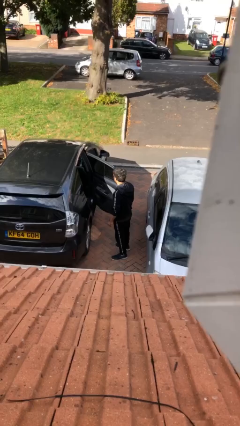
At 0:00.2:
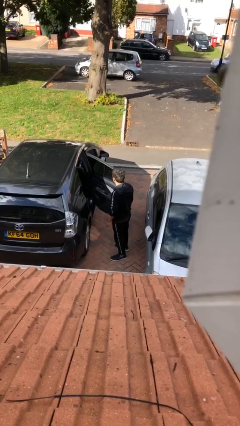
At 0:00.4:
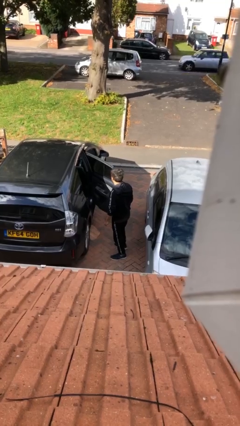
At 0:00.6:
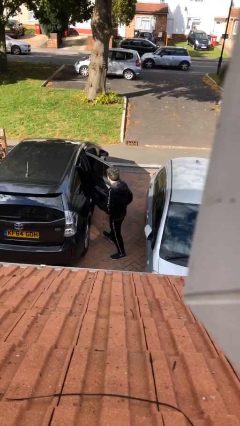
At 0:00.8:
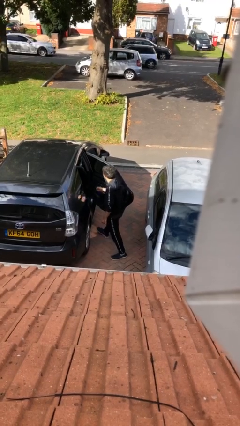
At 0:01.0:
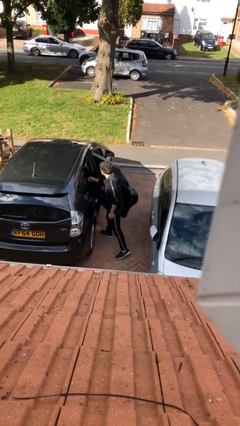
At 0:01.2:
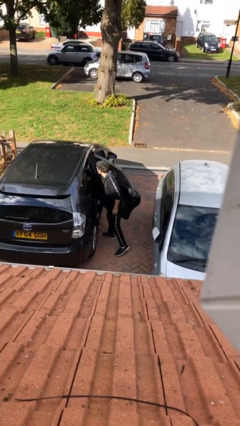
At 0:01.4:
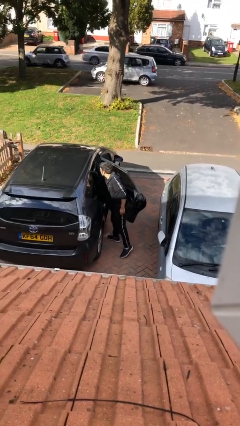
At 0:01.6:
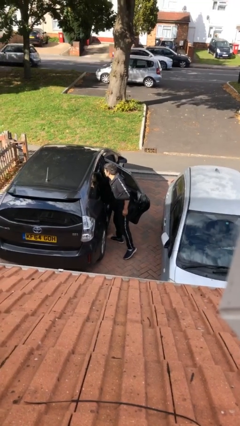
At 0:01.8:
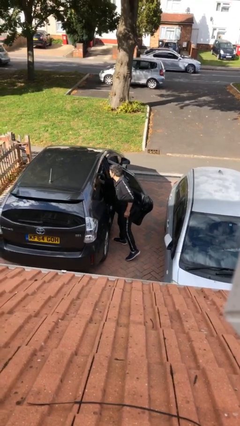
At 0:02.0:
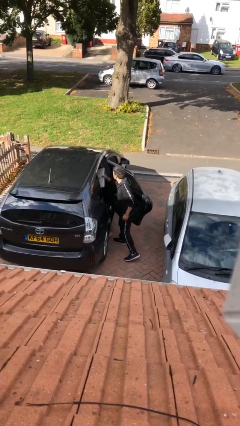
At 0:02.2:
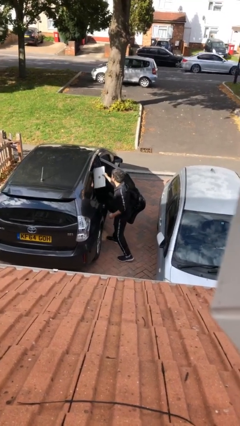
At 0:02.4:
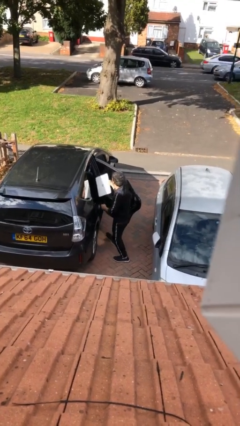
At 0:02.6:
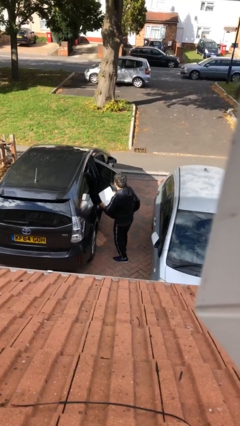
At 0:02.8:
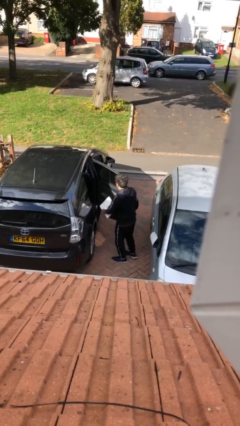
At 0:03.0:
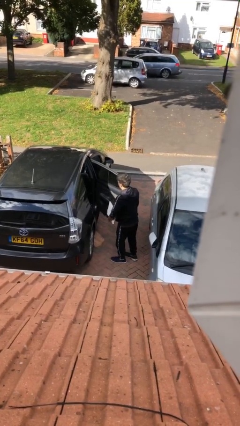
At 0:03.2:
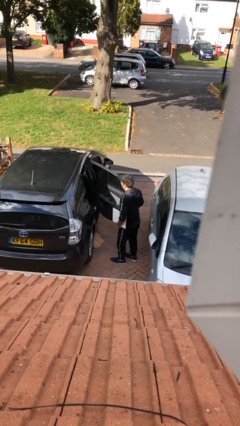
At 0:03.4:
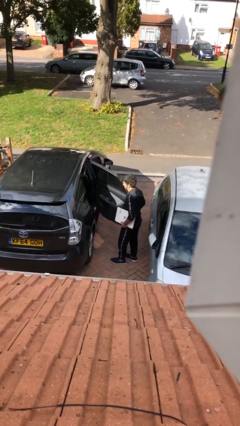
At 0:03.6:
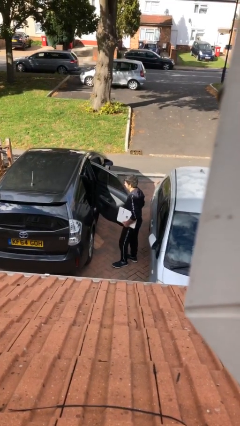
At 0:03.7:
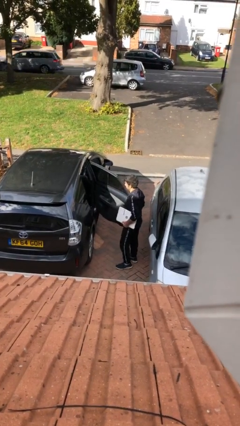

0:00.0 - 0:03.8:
person unloads car

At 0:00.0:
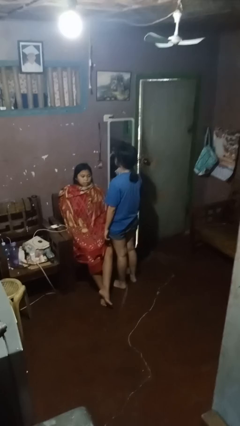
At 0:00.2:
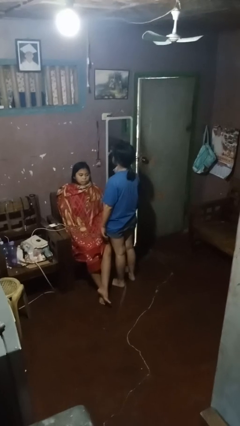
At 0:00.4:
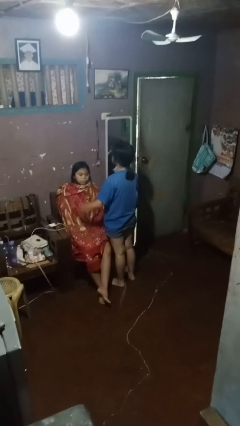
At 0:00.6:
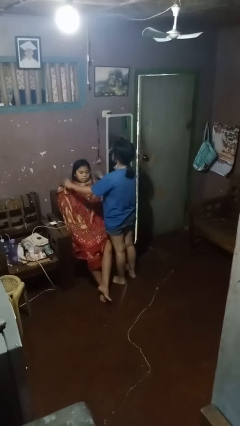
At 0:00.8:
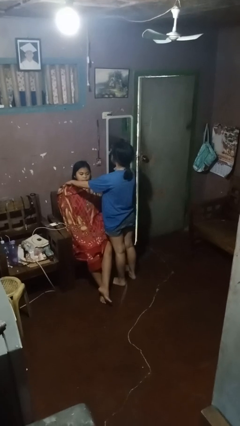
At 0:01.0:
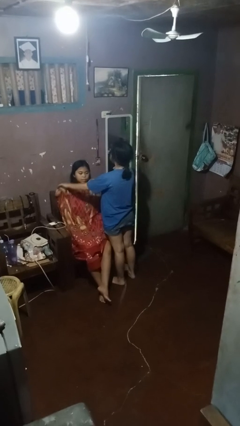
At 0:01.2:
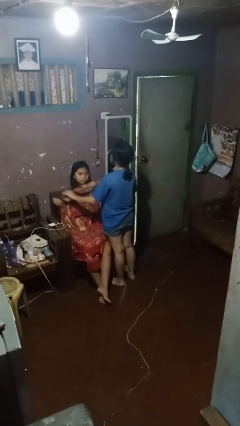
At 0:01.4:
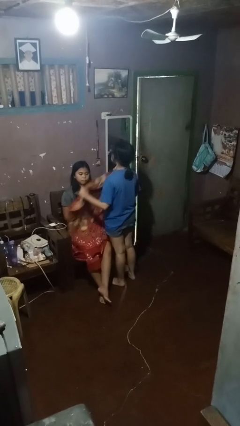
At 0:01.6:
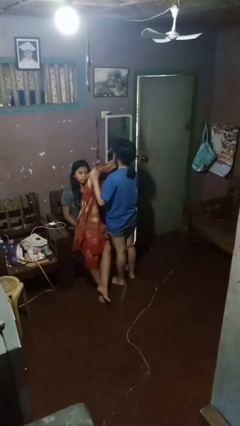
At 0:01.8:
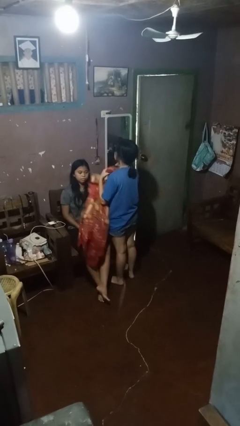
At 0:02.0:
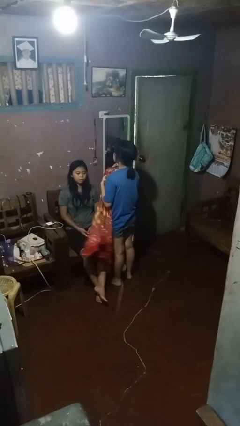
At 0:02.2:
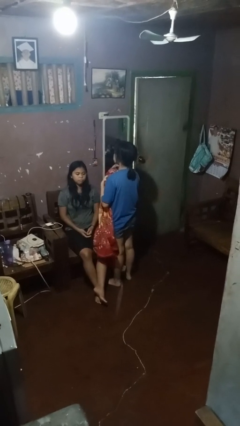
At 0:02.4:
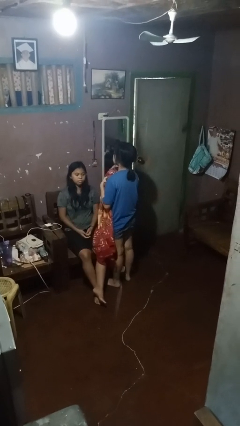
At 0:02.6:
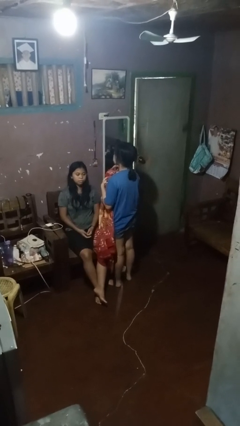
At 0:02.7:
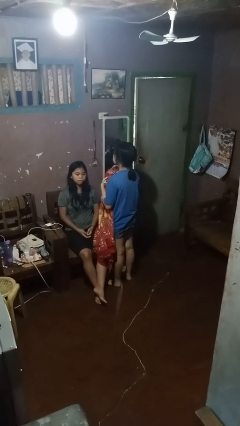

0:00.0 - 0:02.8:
person uncovers friend with blanket

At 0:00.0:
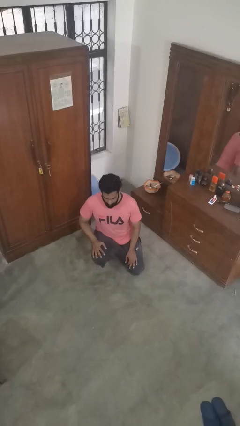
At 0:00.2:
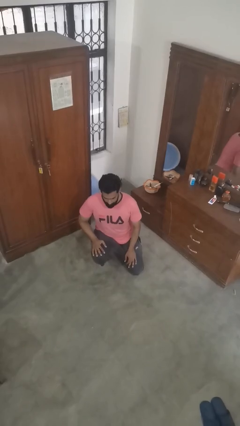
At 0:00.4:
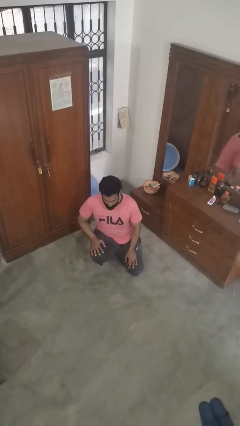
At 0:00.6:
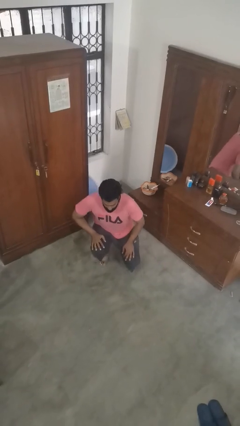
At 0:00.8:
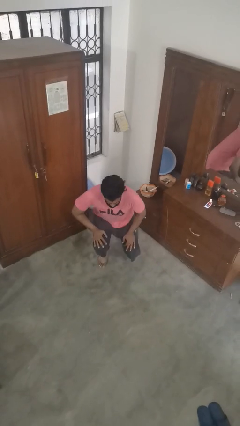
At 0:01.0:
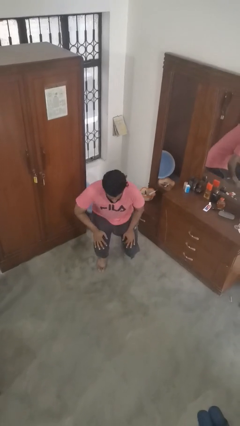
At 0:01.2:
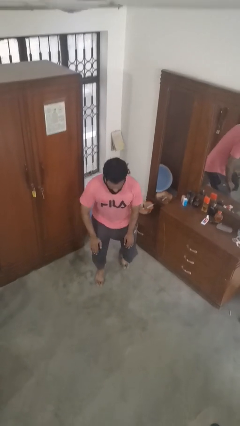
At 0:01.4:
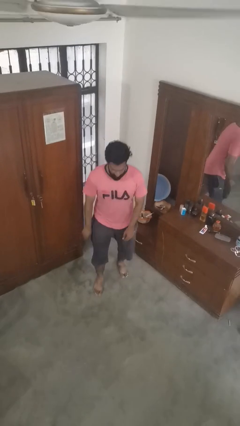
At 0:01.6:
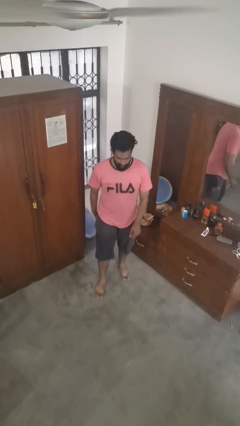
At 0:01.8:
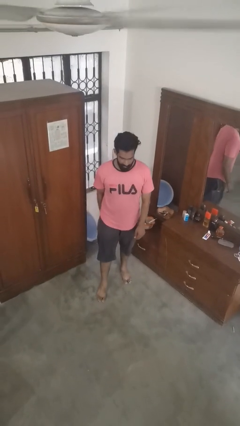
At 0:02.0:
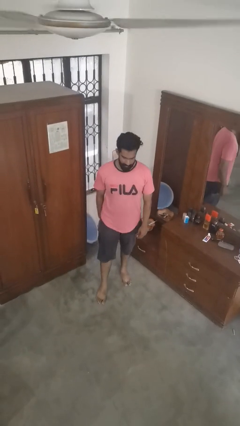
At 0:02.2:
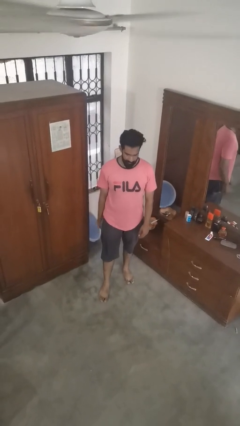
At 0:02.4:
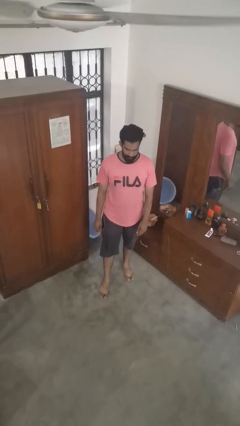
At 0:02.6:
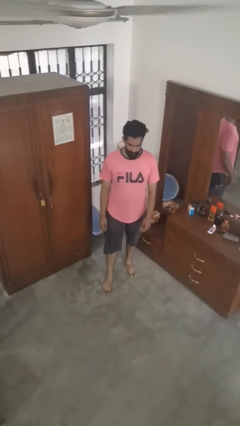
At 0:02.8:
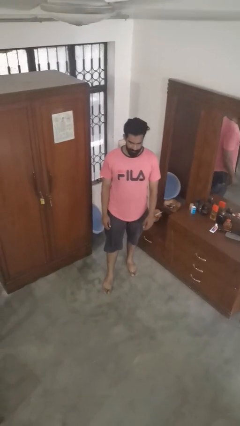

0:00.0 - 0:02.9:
person stands up from floor

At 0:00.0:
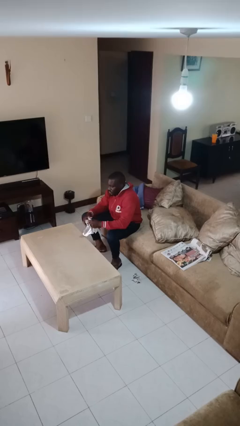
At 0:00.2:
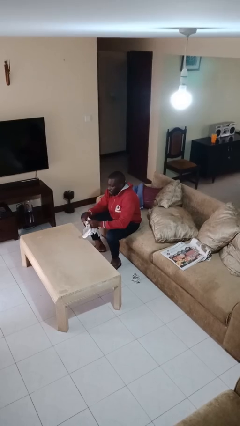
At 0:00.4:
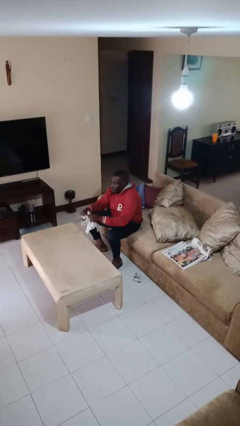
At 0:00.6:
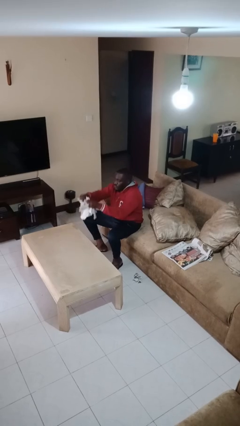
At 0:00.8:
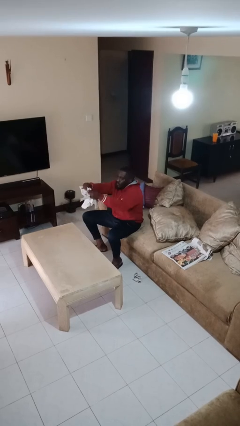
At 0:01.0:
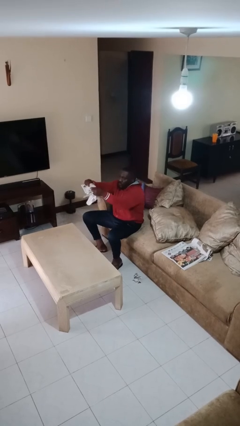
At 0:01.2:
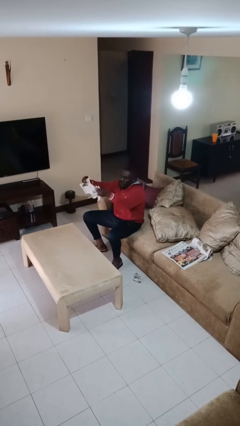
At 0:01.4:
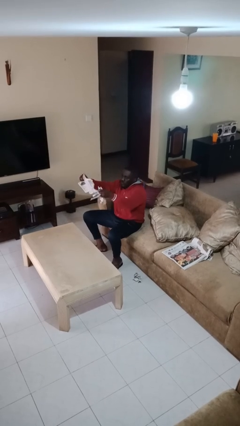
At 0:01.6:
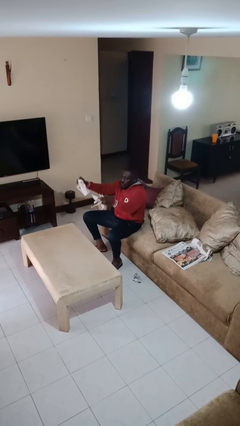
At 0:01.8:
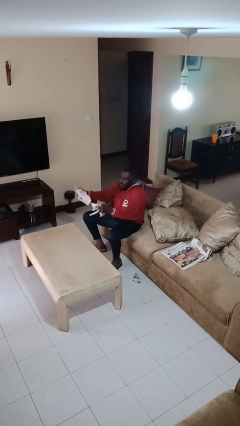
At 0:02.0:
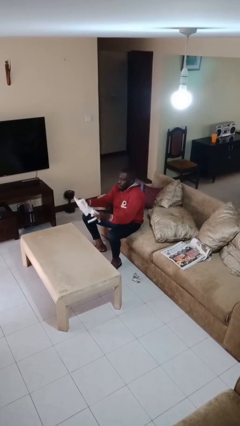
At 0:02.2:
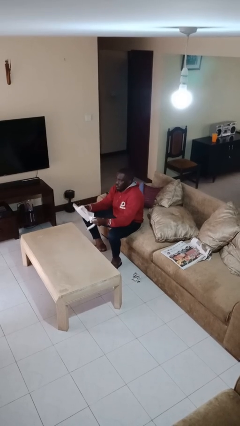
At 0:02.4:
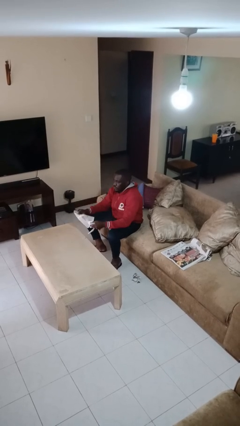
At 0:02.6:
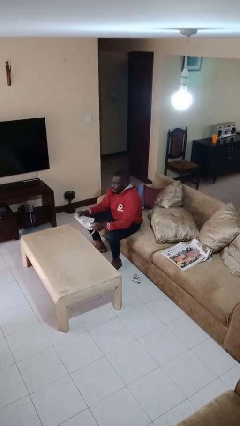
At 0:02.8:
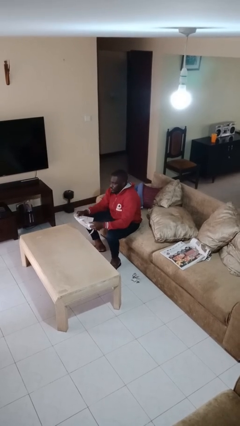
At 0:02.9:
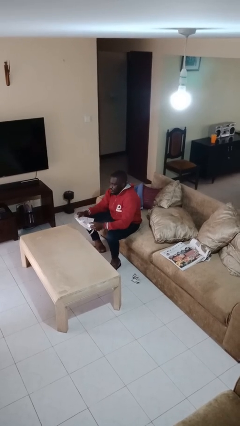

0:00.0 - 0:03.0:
person tears paper

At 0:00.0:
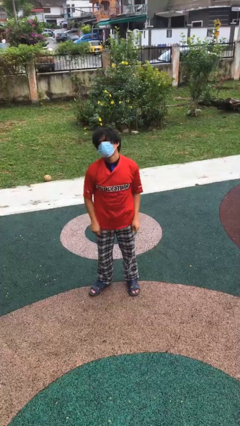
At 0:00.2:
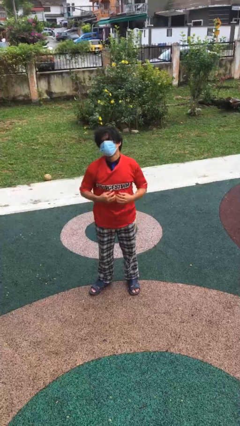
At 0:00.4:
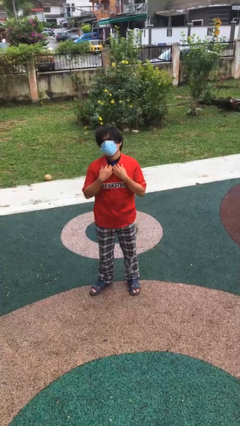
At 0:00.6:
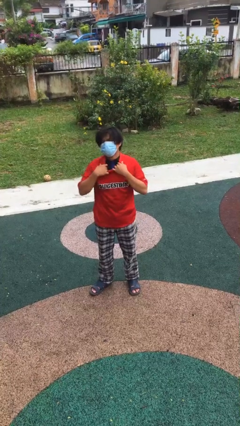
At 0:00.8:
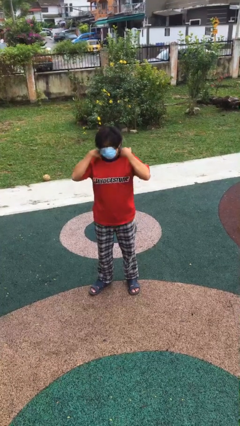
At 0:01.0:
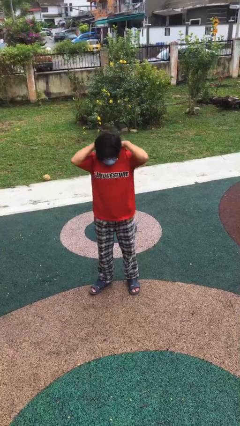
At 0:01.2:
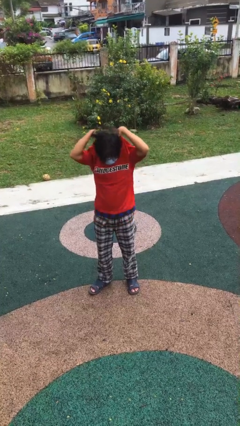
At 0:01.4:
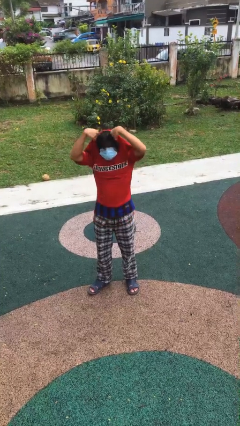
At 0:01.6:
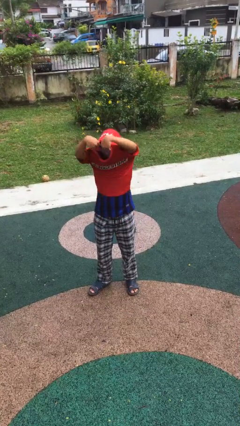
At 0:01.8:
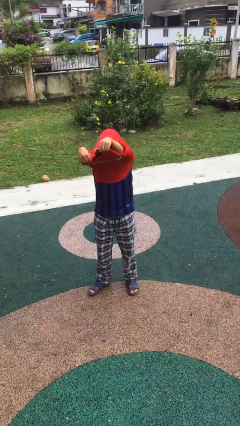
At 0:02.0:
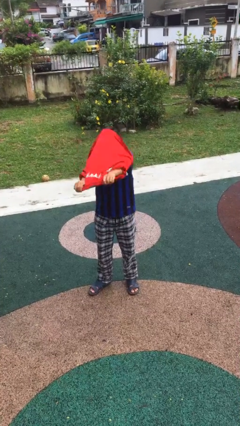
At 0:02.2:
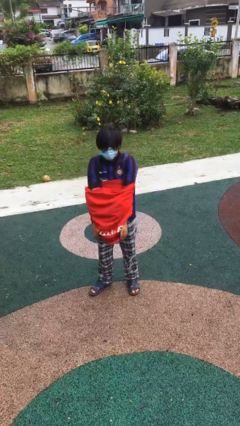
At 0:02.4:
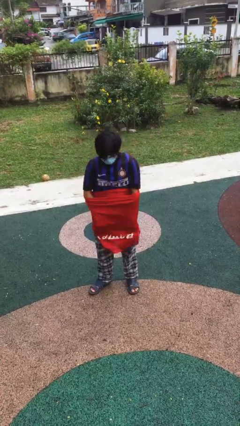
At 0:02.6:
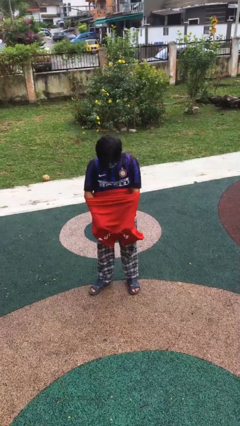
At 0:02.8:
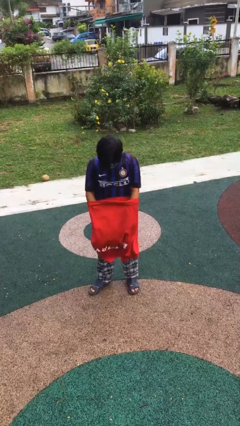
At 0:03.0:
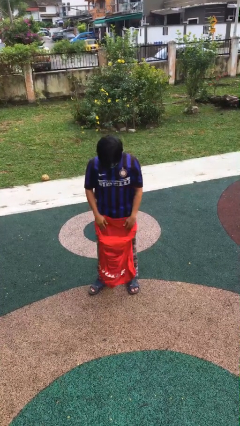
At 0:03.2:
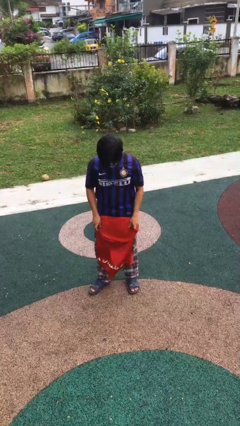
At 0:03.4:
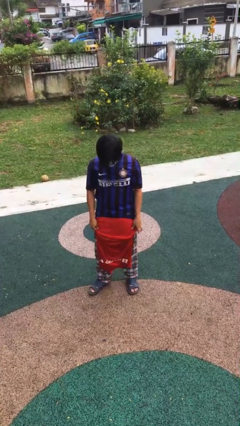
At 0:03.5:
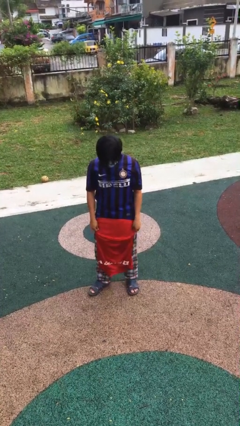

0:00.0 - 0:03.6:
person takes off shirt

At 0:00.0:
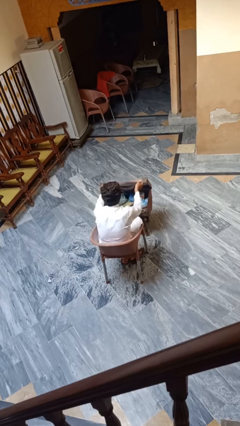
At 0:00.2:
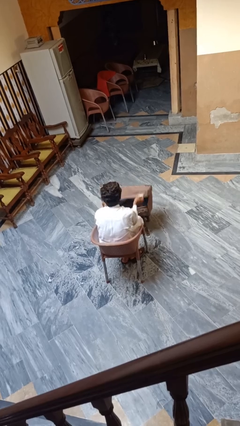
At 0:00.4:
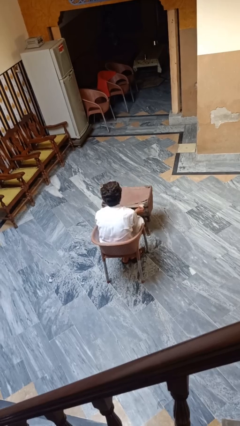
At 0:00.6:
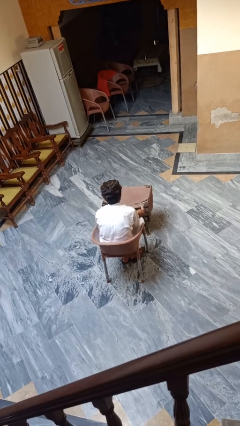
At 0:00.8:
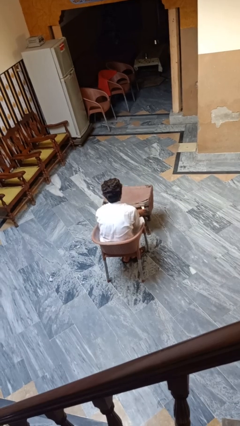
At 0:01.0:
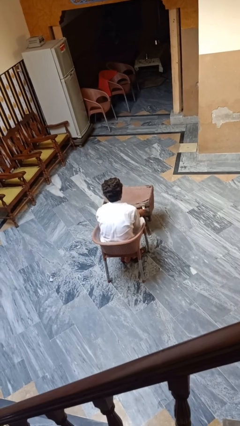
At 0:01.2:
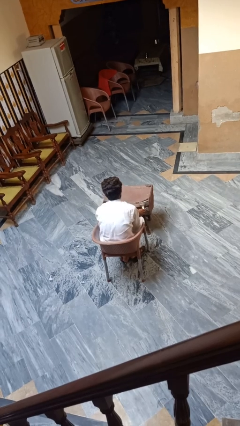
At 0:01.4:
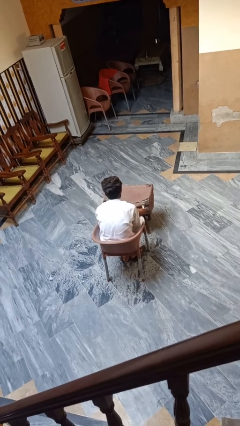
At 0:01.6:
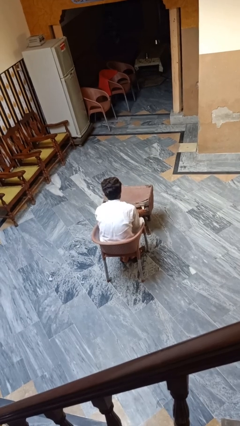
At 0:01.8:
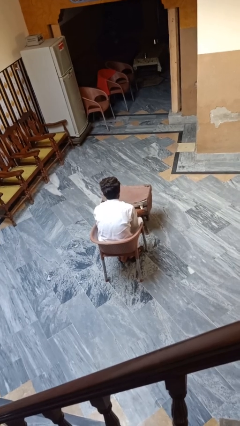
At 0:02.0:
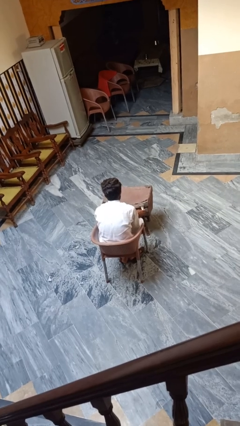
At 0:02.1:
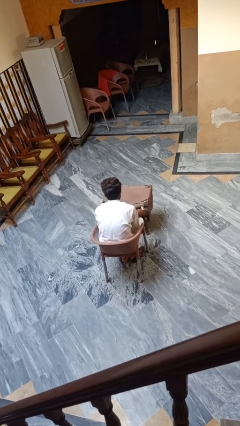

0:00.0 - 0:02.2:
person closes suitcase
